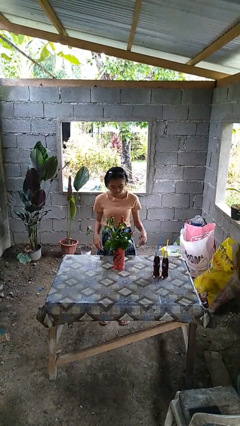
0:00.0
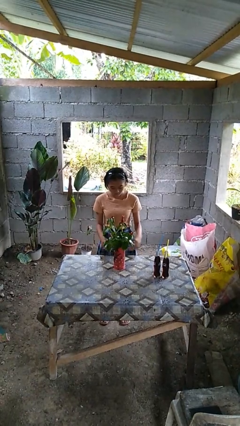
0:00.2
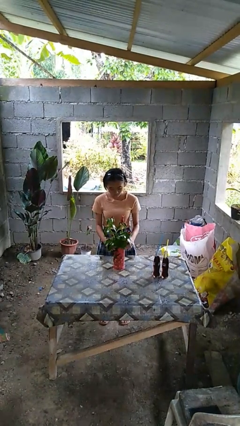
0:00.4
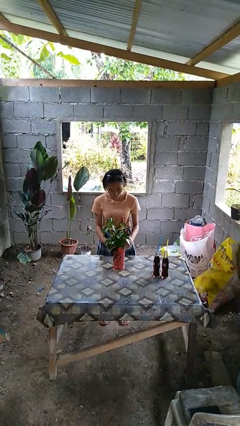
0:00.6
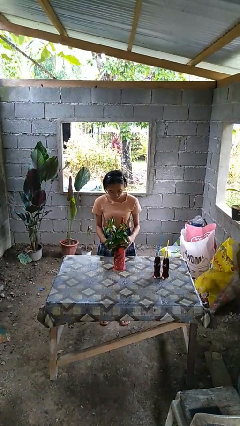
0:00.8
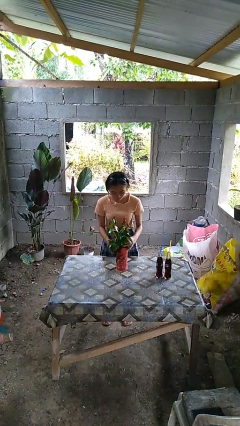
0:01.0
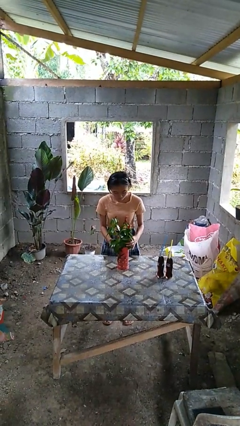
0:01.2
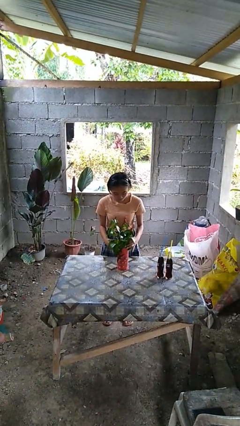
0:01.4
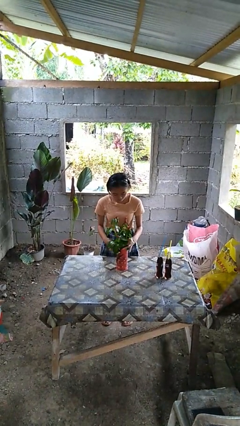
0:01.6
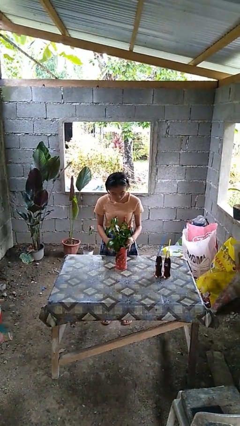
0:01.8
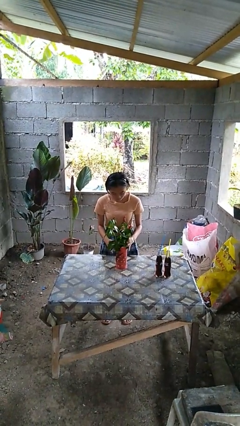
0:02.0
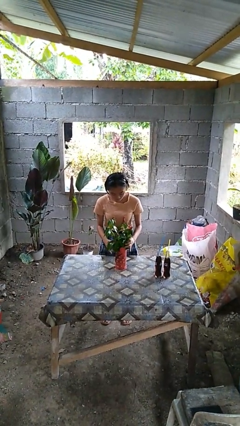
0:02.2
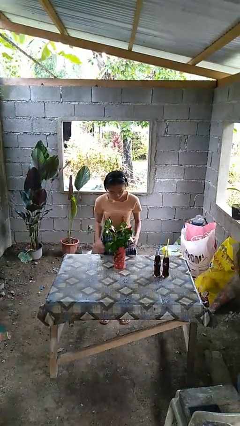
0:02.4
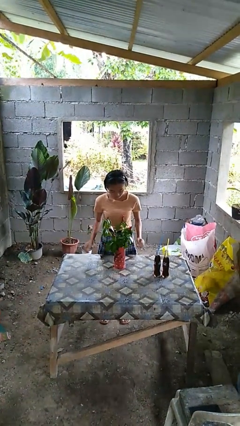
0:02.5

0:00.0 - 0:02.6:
person arranges flowers in vase

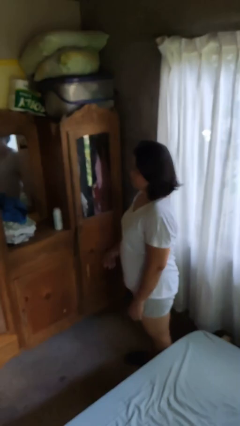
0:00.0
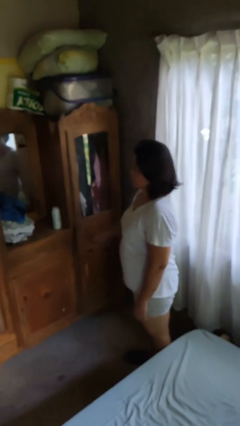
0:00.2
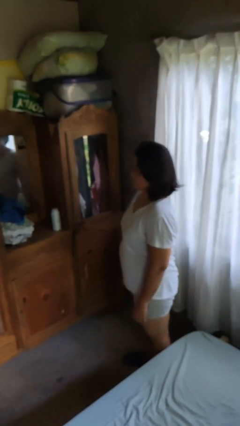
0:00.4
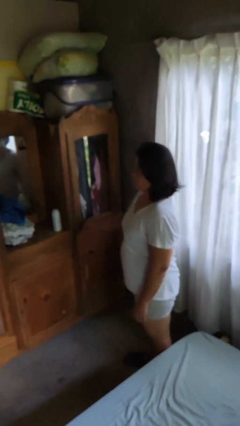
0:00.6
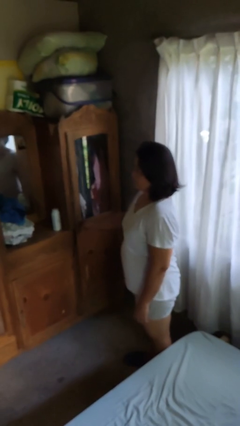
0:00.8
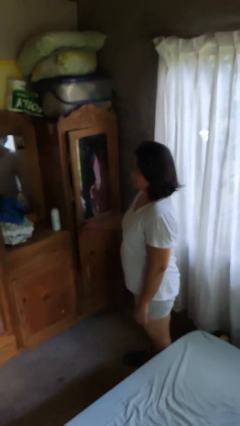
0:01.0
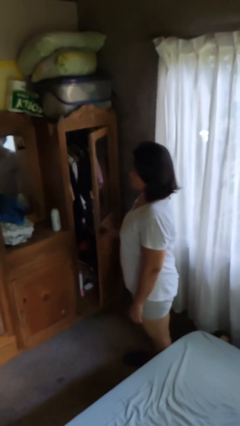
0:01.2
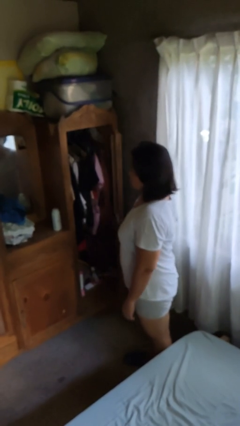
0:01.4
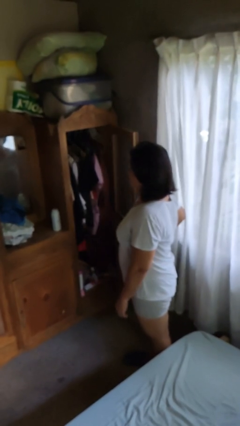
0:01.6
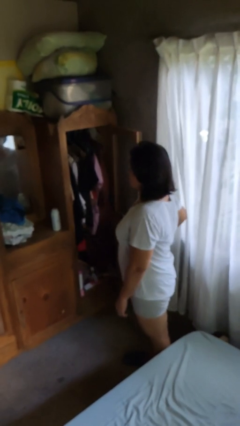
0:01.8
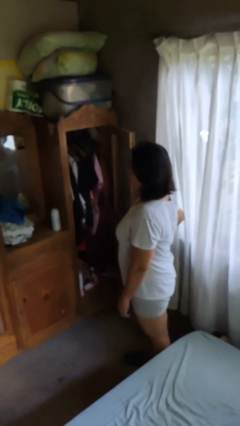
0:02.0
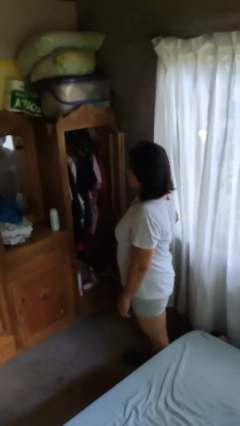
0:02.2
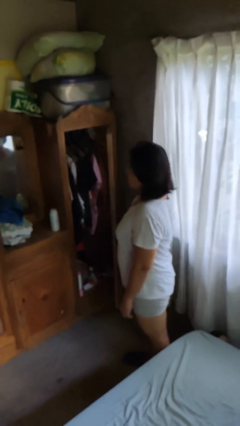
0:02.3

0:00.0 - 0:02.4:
person opens dresser drawer

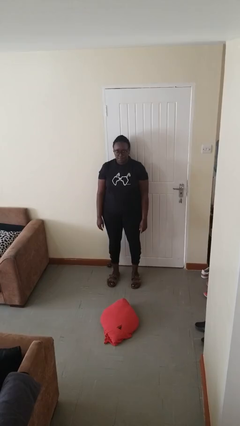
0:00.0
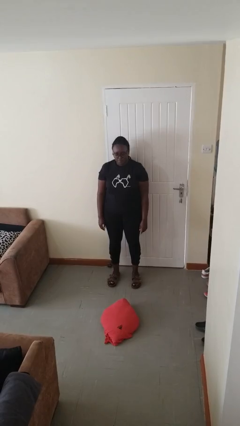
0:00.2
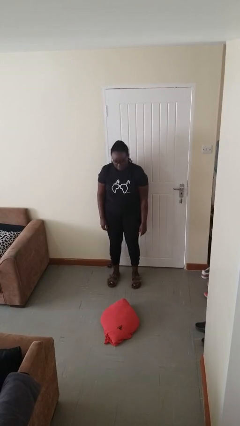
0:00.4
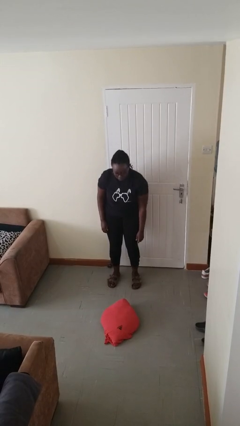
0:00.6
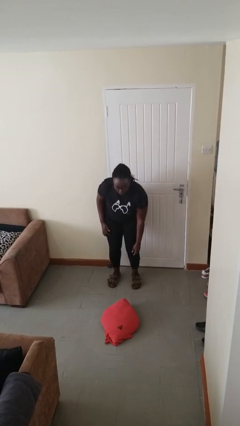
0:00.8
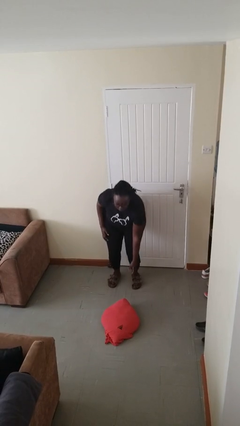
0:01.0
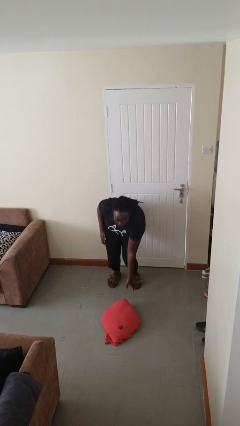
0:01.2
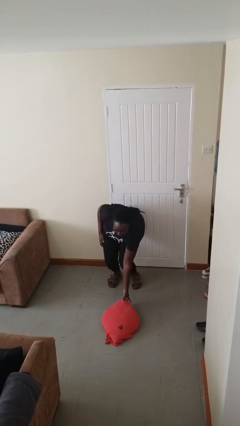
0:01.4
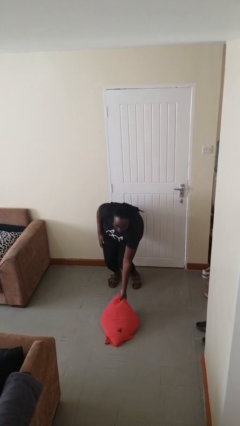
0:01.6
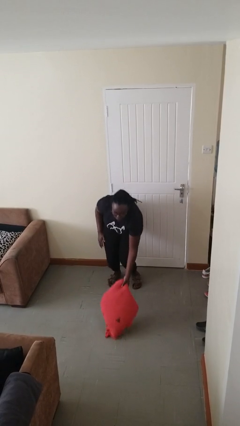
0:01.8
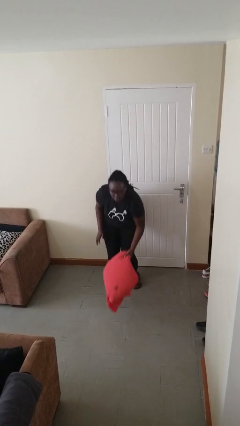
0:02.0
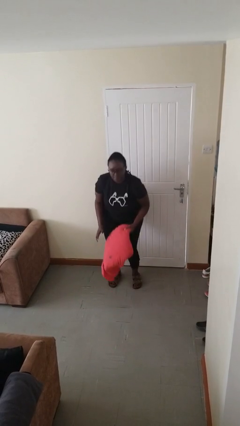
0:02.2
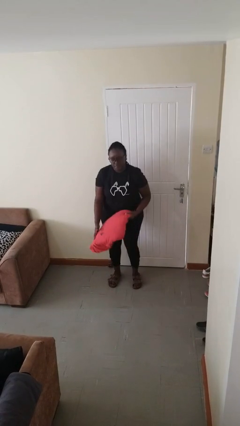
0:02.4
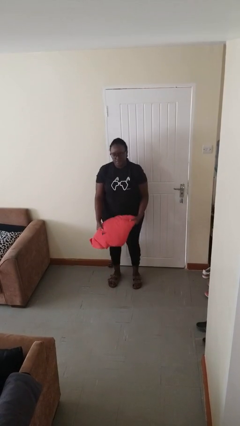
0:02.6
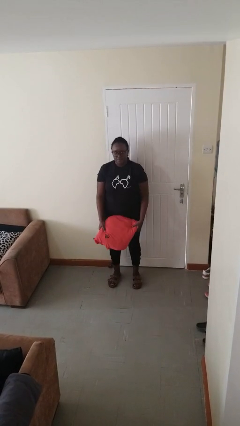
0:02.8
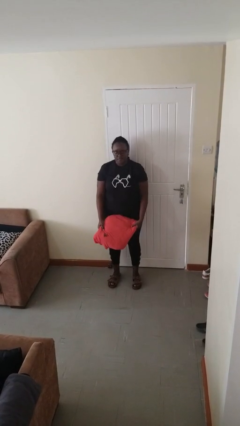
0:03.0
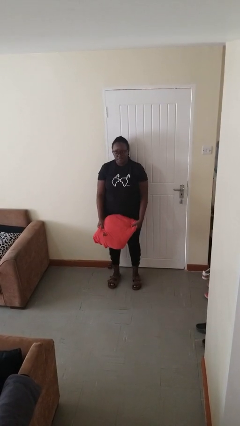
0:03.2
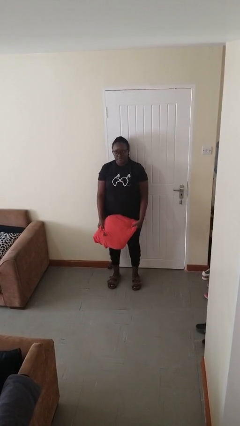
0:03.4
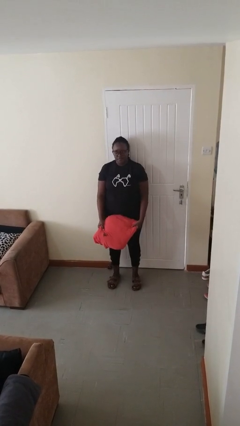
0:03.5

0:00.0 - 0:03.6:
person picks up object from floor

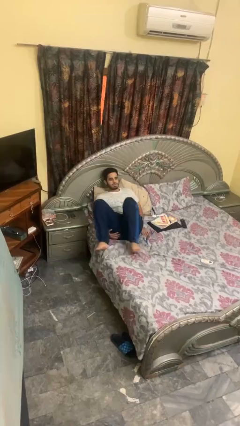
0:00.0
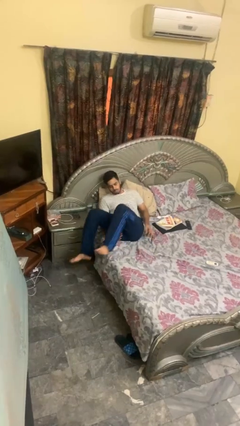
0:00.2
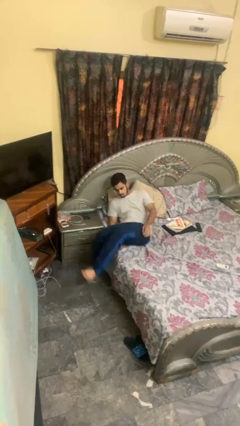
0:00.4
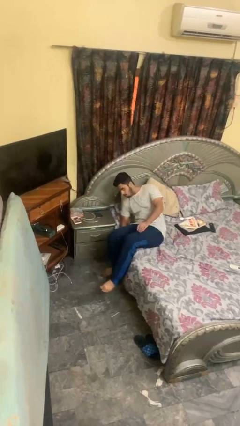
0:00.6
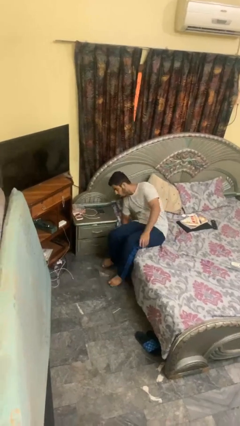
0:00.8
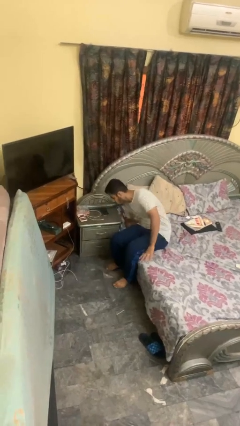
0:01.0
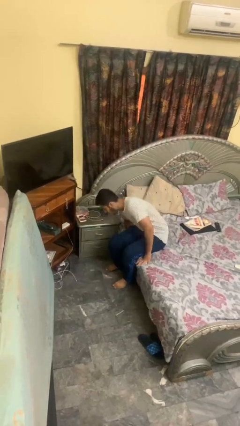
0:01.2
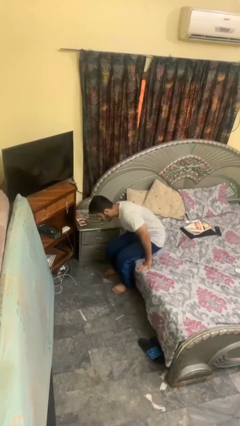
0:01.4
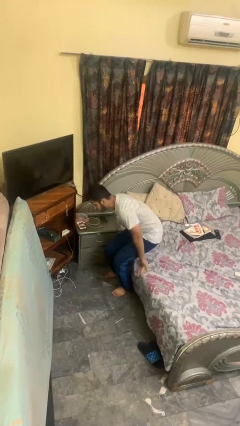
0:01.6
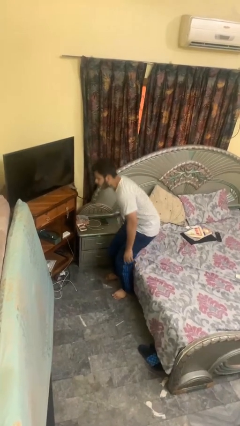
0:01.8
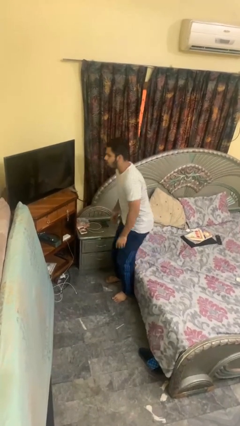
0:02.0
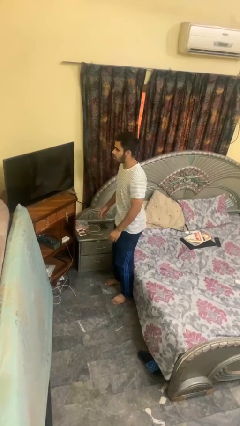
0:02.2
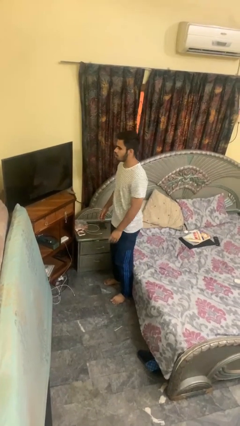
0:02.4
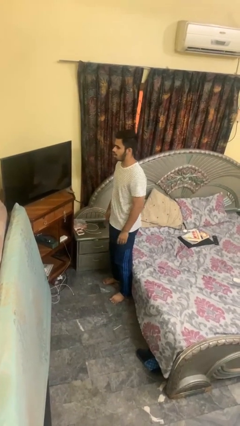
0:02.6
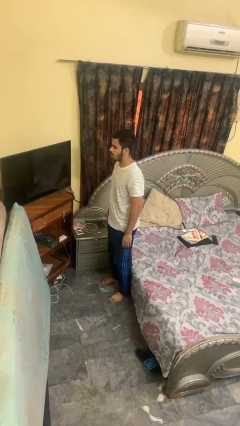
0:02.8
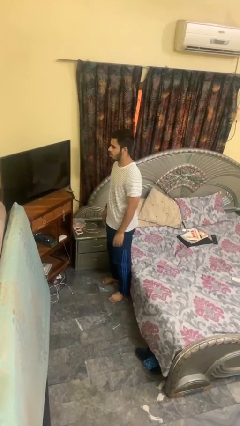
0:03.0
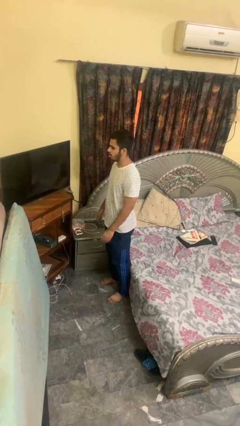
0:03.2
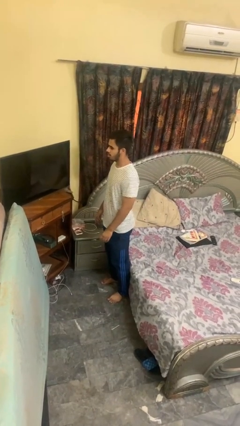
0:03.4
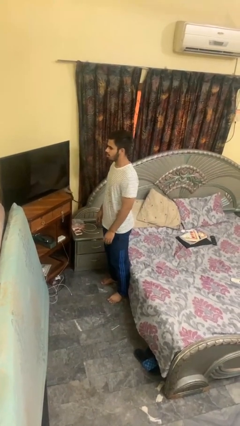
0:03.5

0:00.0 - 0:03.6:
person stands up

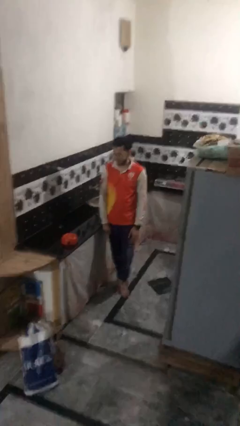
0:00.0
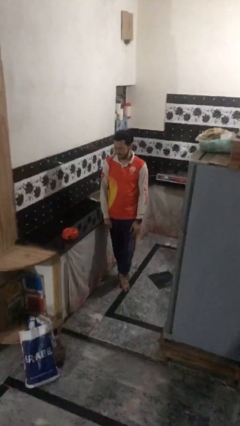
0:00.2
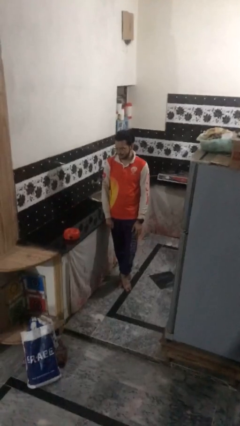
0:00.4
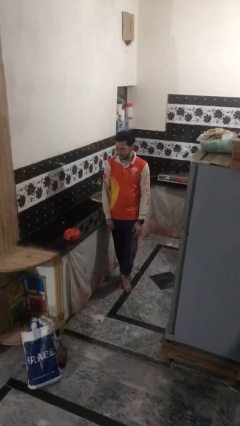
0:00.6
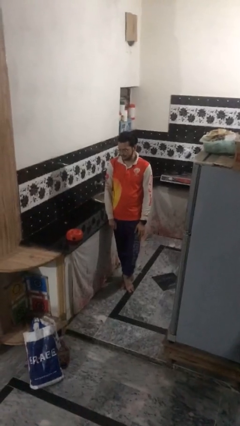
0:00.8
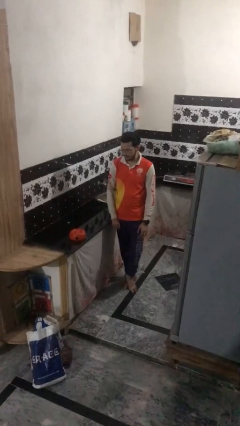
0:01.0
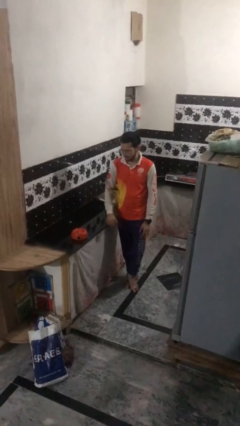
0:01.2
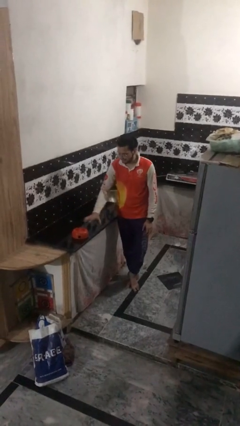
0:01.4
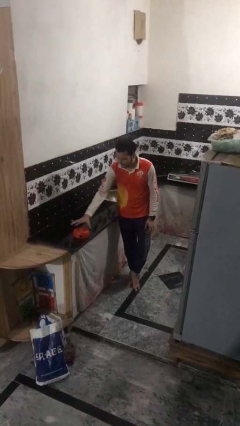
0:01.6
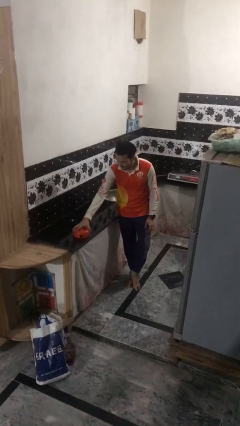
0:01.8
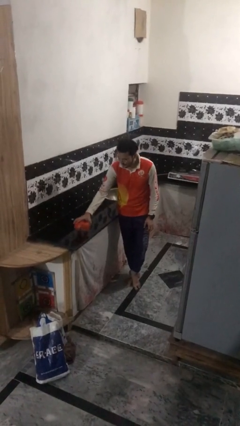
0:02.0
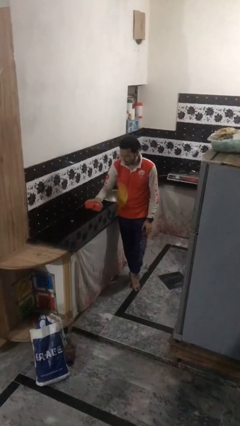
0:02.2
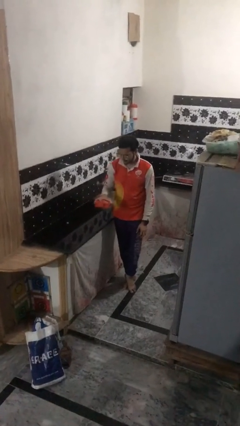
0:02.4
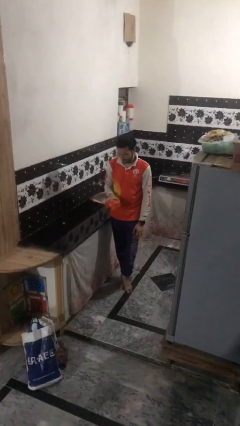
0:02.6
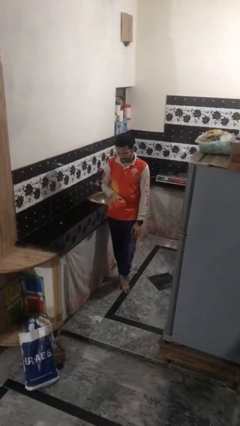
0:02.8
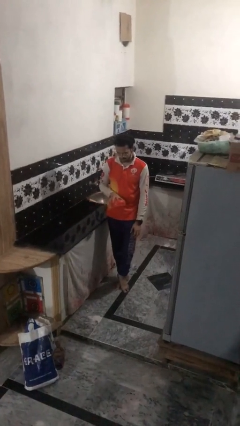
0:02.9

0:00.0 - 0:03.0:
person picks up object from countertop

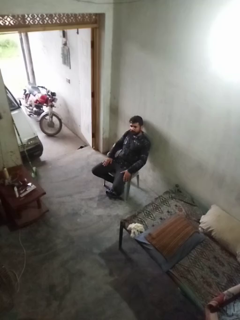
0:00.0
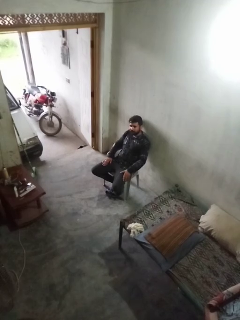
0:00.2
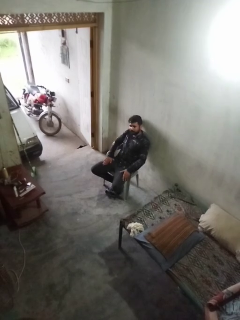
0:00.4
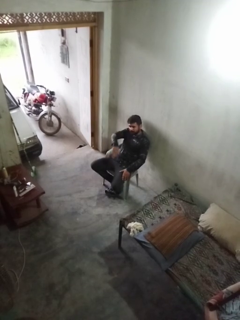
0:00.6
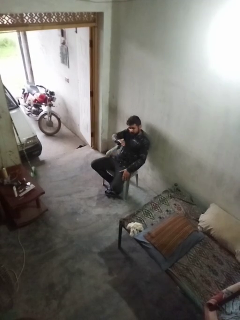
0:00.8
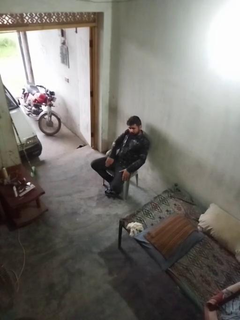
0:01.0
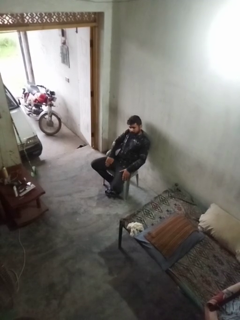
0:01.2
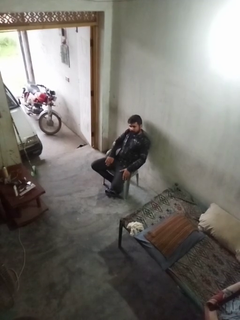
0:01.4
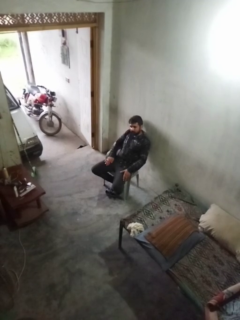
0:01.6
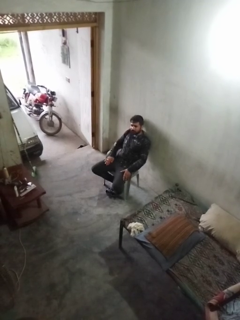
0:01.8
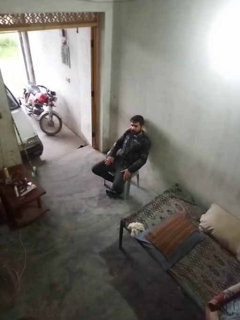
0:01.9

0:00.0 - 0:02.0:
person slaps hands on thighs

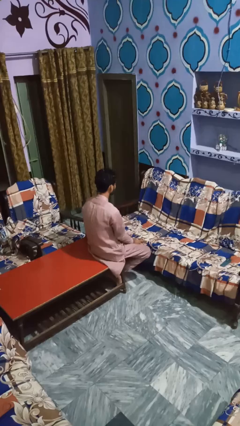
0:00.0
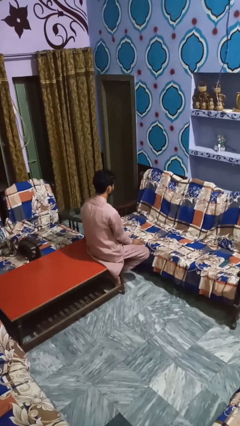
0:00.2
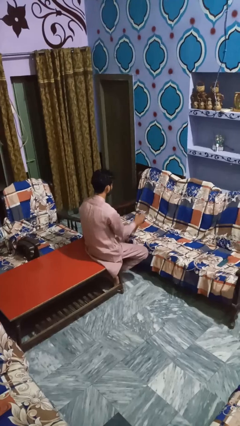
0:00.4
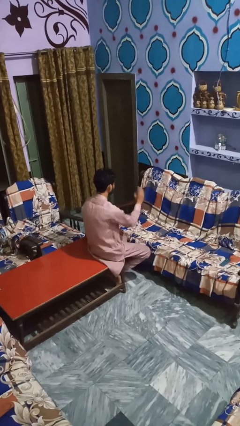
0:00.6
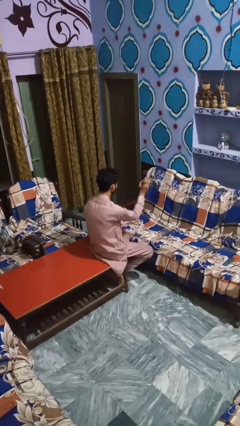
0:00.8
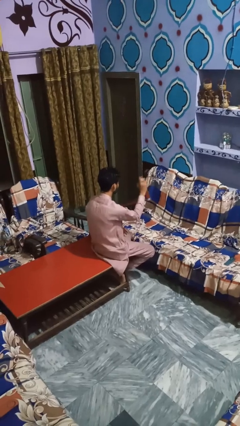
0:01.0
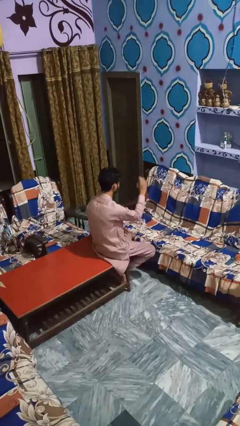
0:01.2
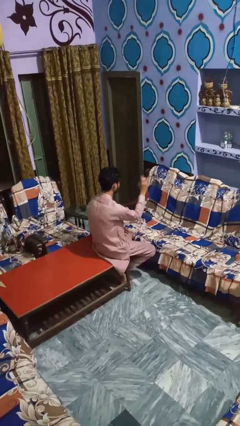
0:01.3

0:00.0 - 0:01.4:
person sprays from bottle
